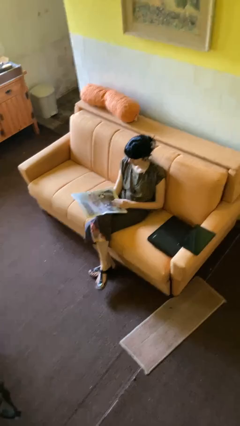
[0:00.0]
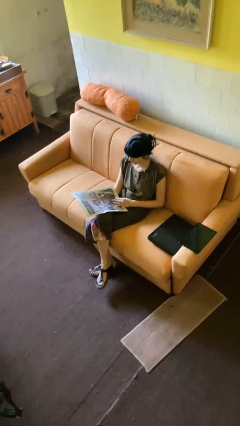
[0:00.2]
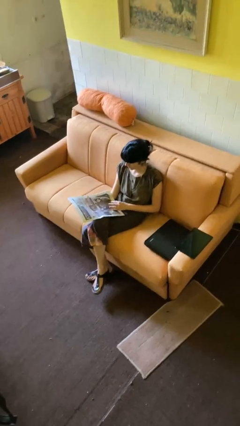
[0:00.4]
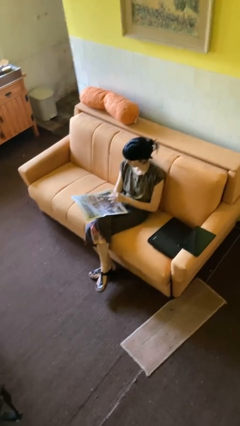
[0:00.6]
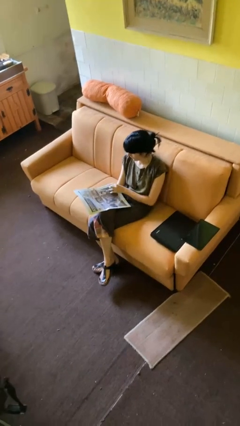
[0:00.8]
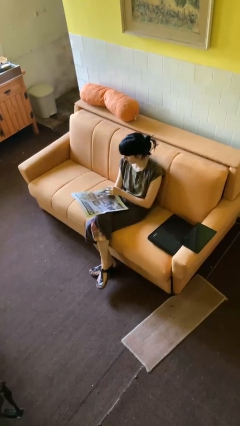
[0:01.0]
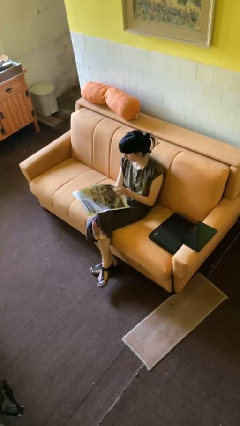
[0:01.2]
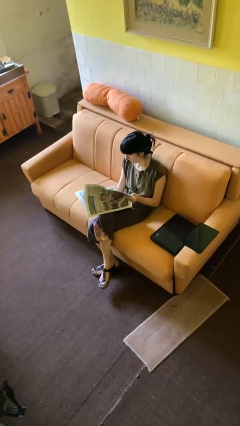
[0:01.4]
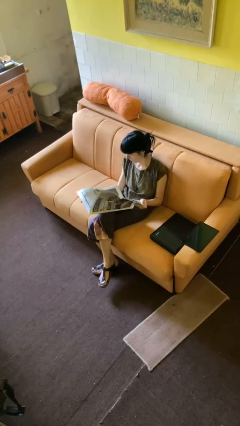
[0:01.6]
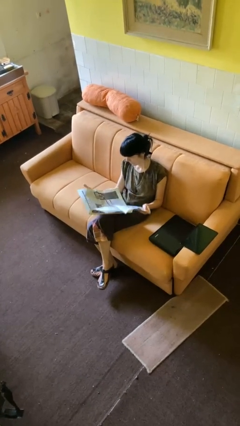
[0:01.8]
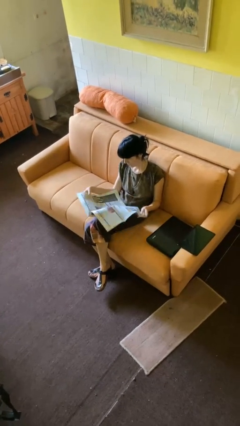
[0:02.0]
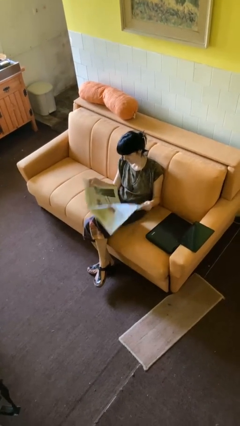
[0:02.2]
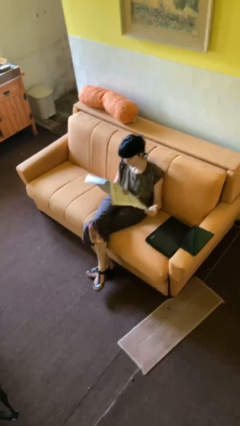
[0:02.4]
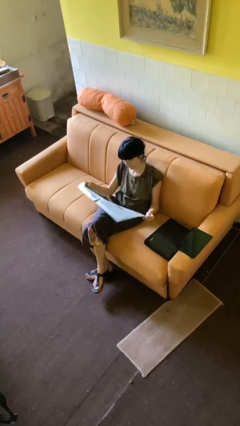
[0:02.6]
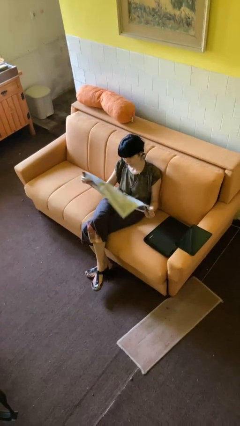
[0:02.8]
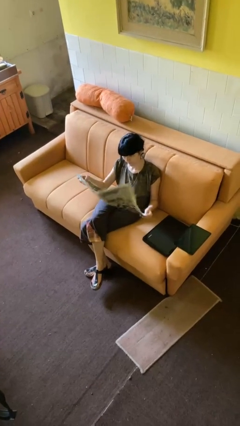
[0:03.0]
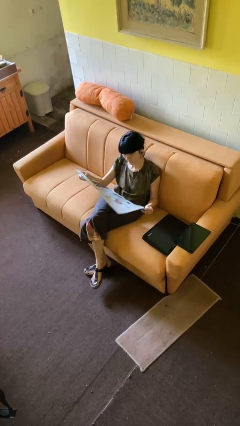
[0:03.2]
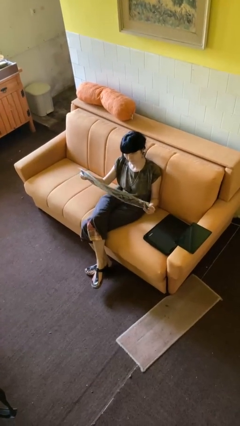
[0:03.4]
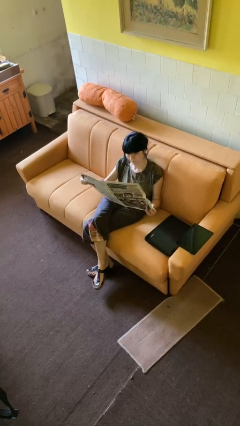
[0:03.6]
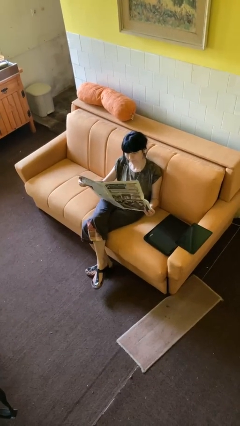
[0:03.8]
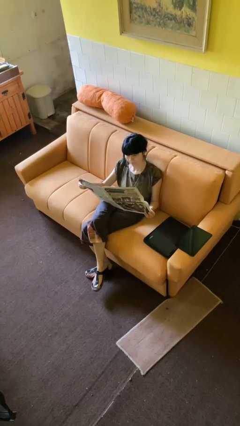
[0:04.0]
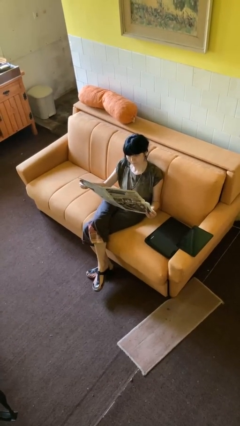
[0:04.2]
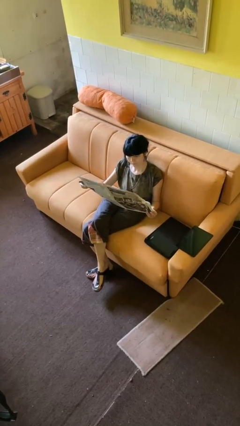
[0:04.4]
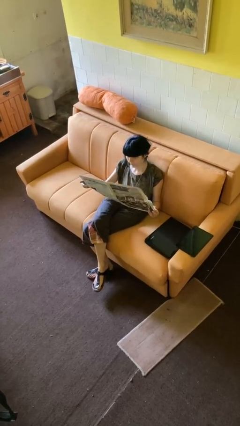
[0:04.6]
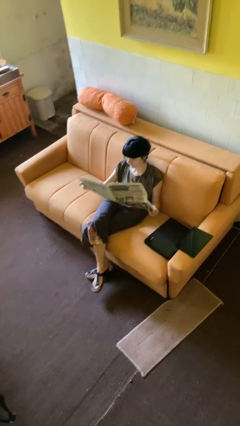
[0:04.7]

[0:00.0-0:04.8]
person reads newspaper

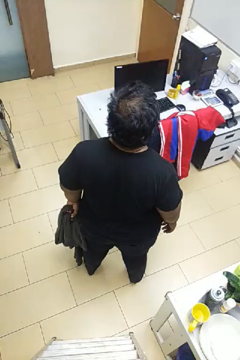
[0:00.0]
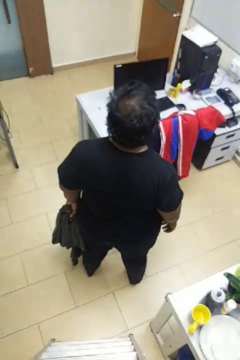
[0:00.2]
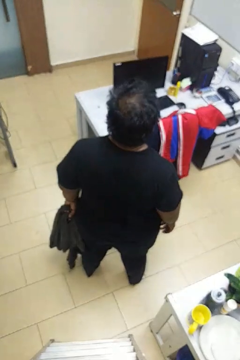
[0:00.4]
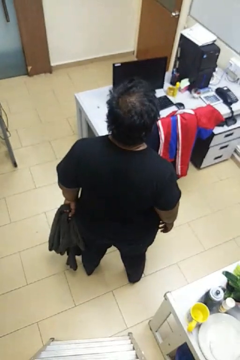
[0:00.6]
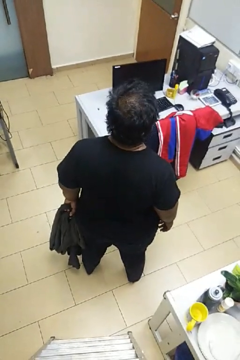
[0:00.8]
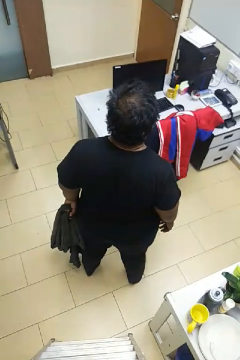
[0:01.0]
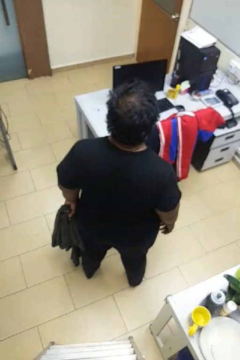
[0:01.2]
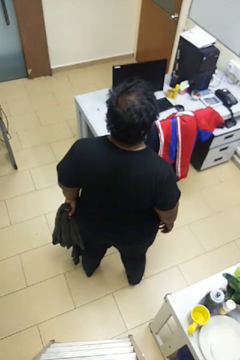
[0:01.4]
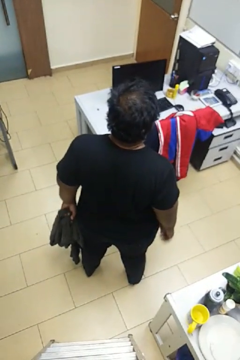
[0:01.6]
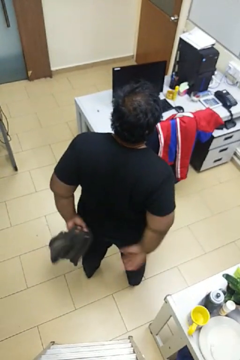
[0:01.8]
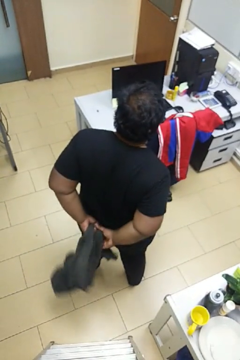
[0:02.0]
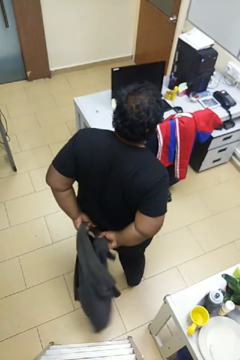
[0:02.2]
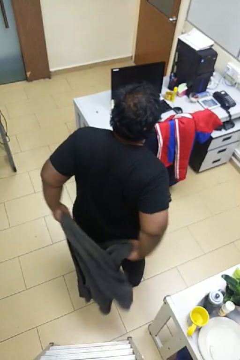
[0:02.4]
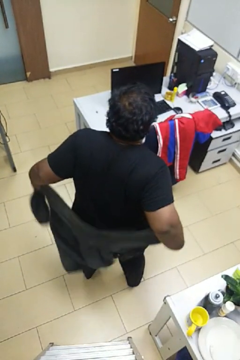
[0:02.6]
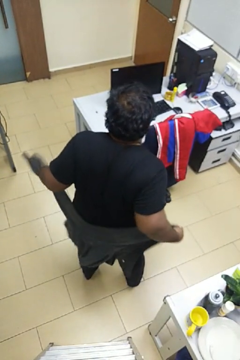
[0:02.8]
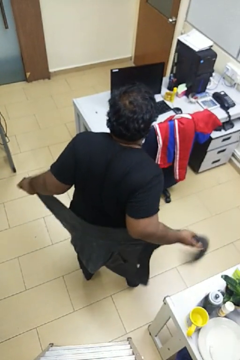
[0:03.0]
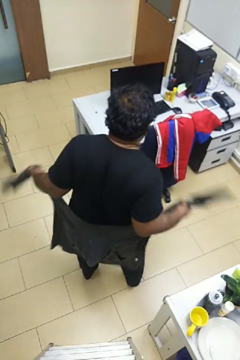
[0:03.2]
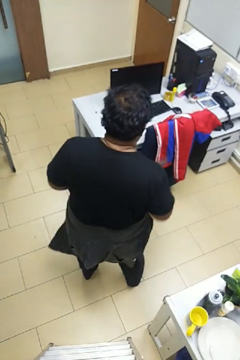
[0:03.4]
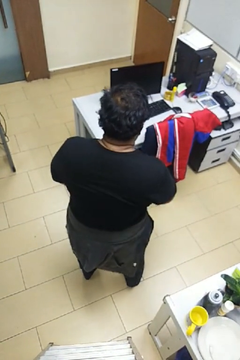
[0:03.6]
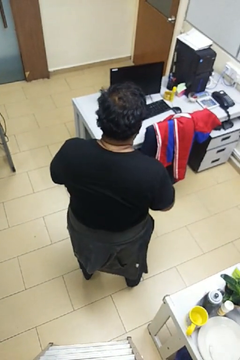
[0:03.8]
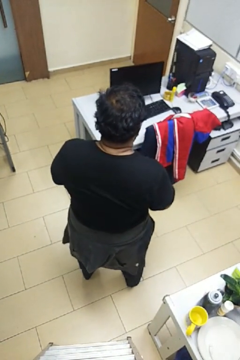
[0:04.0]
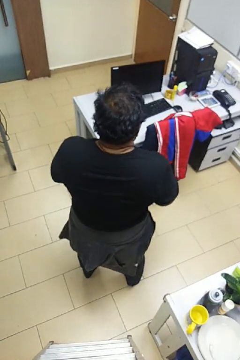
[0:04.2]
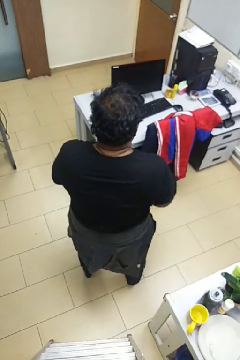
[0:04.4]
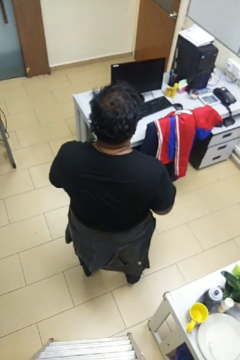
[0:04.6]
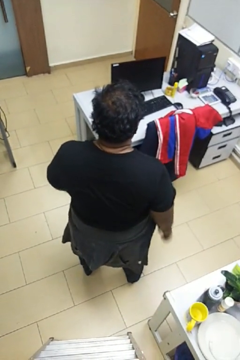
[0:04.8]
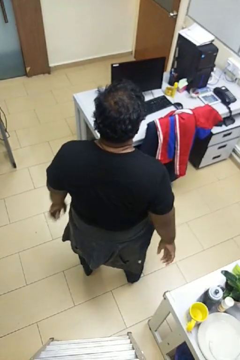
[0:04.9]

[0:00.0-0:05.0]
person ties jacket around waist

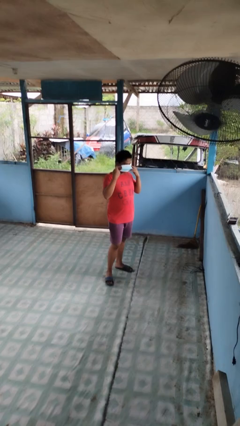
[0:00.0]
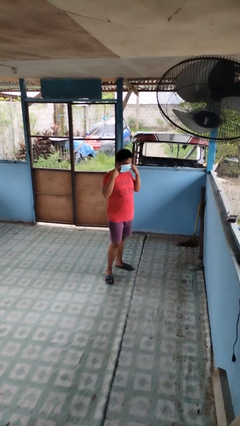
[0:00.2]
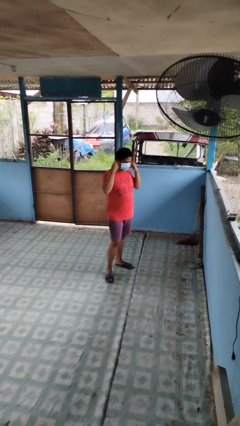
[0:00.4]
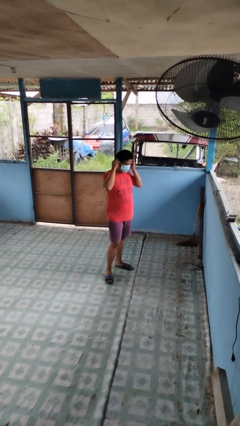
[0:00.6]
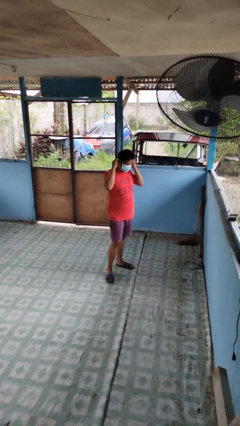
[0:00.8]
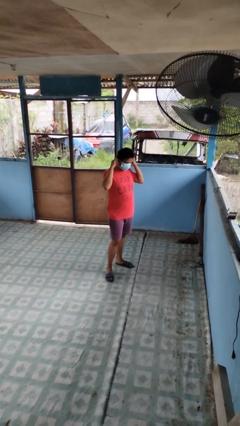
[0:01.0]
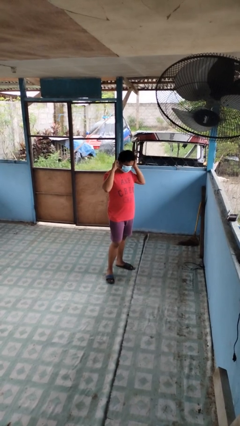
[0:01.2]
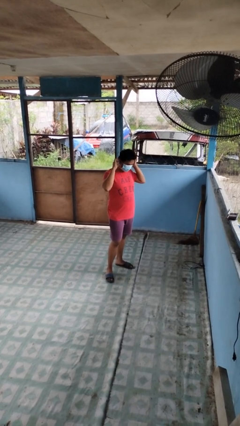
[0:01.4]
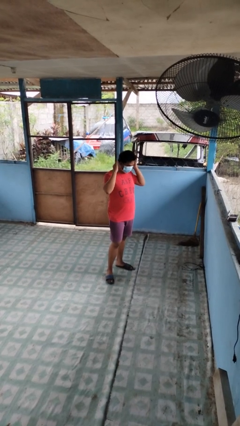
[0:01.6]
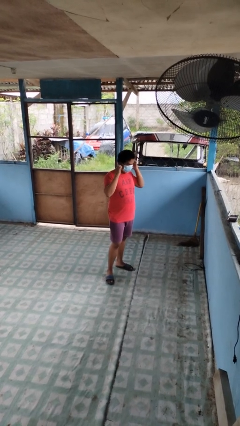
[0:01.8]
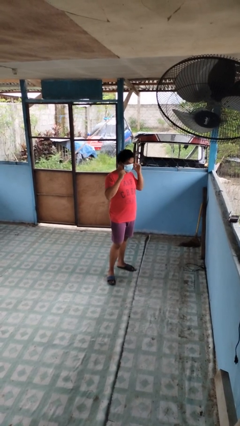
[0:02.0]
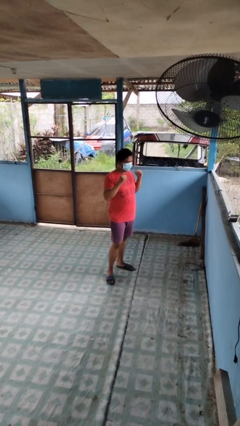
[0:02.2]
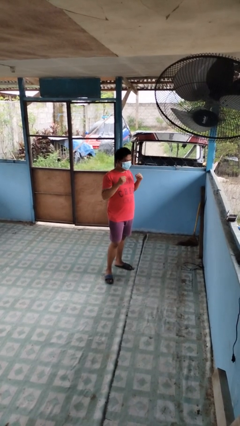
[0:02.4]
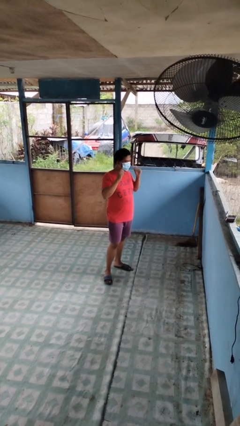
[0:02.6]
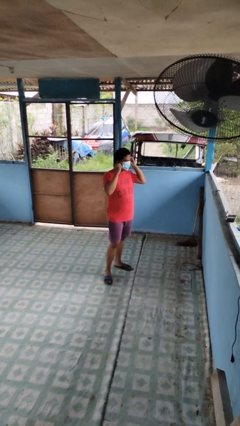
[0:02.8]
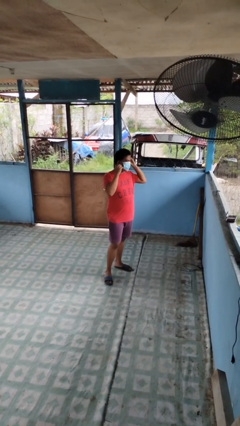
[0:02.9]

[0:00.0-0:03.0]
person puts on facemask

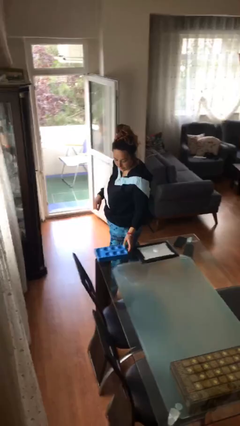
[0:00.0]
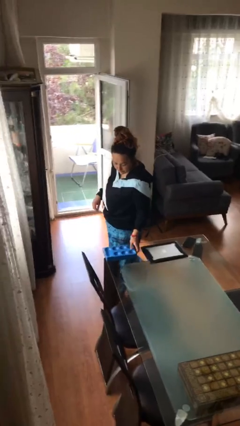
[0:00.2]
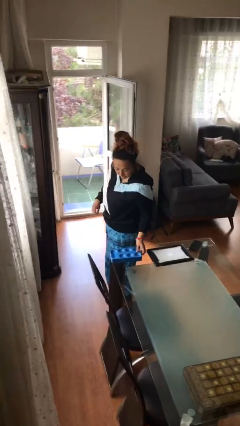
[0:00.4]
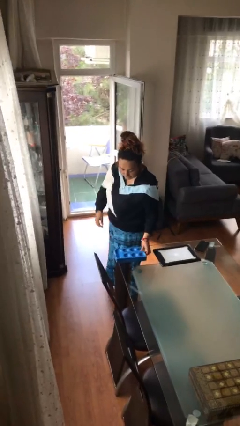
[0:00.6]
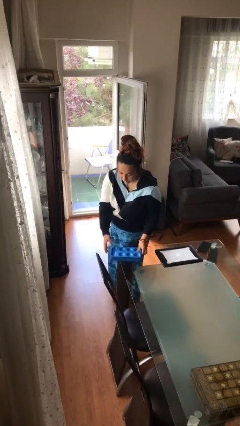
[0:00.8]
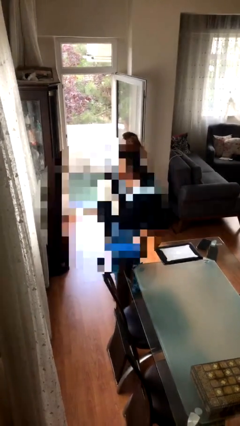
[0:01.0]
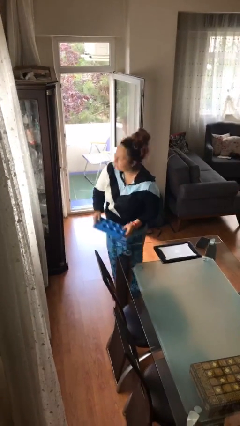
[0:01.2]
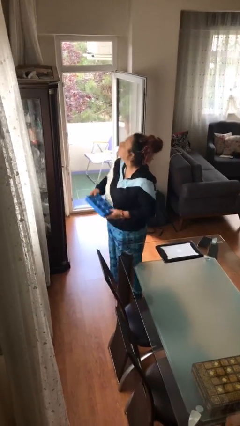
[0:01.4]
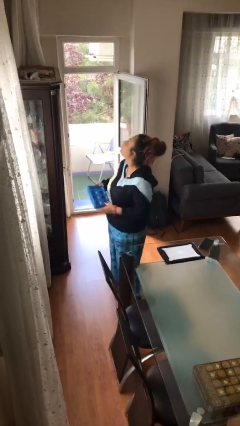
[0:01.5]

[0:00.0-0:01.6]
person picks up object from table

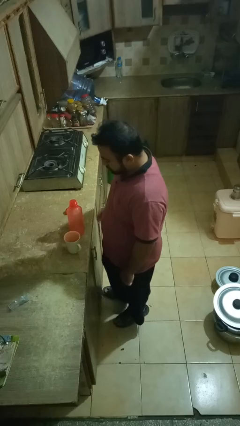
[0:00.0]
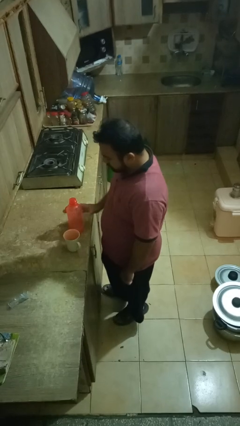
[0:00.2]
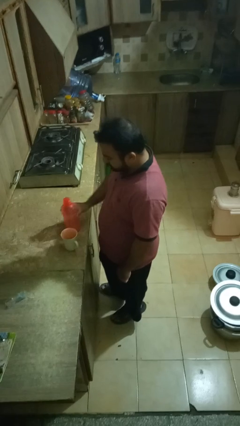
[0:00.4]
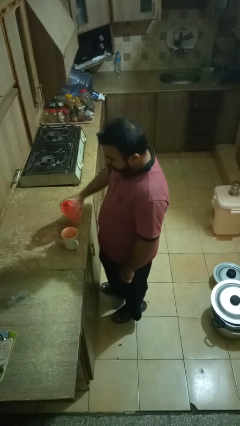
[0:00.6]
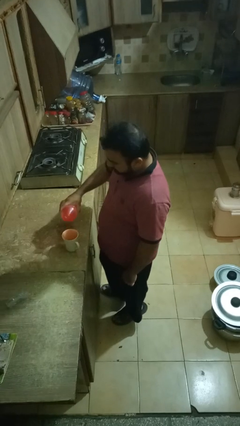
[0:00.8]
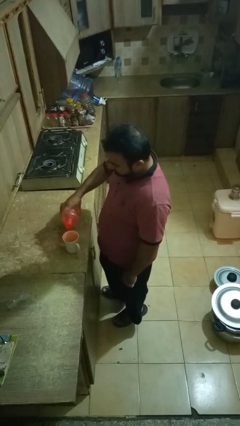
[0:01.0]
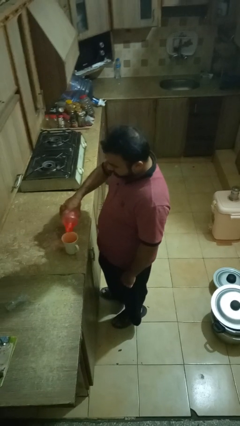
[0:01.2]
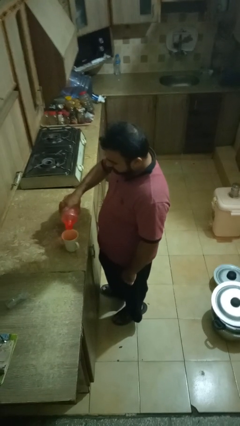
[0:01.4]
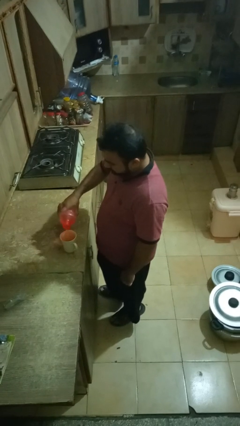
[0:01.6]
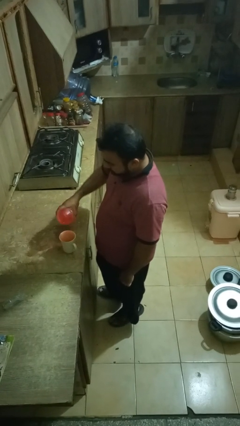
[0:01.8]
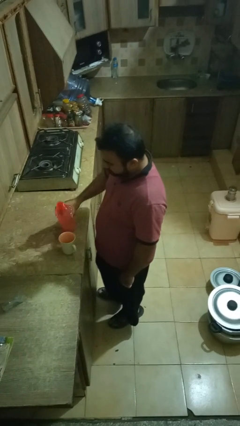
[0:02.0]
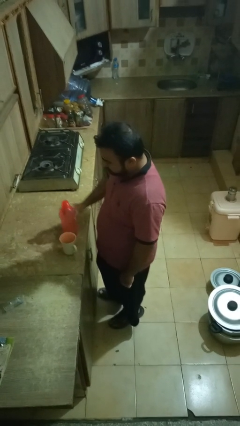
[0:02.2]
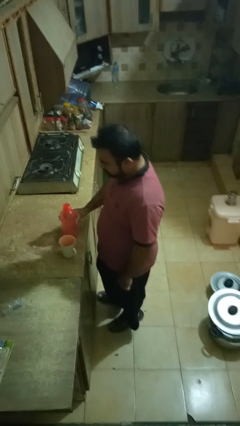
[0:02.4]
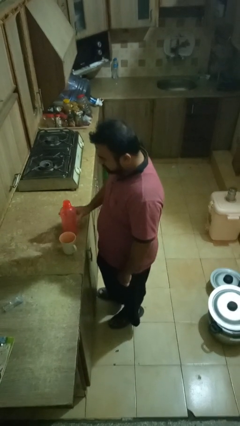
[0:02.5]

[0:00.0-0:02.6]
person pours liquid into cup

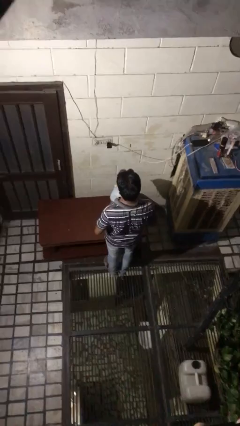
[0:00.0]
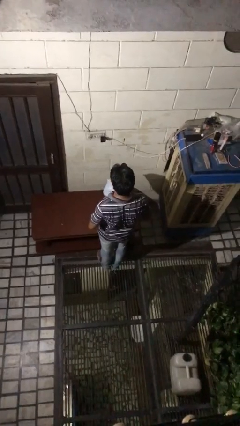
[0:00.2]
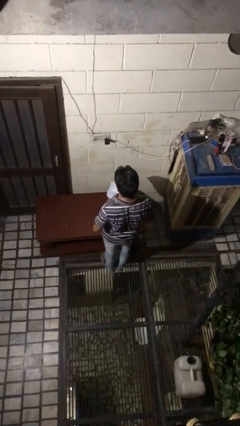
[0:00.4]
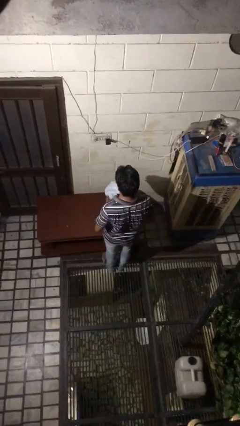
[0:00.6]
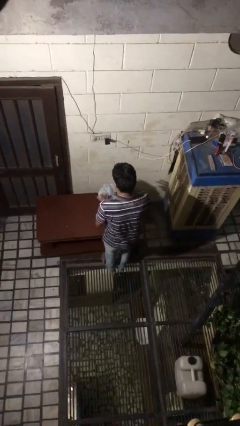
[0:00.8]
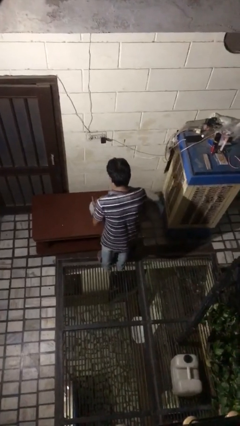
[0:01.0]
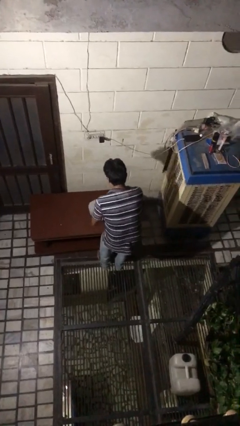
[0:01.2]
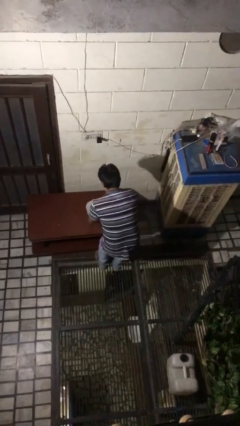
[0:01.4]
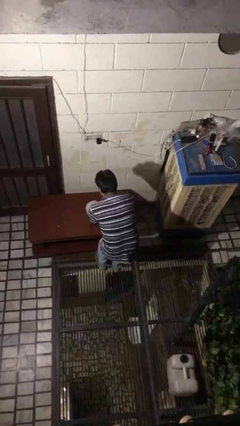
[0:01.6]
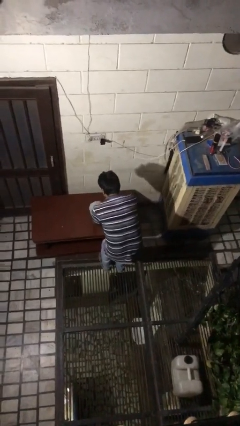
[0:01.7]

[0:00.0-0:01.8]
person throws object on table
